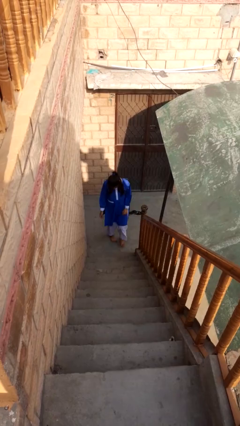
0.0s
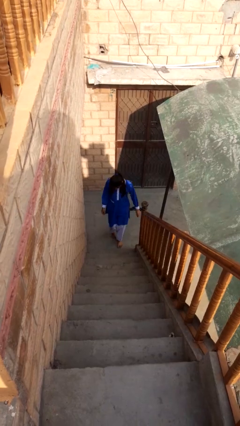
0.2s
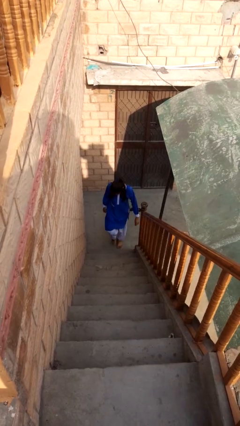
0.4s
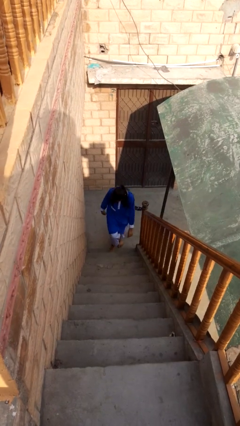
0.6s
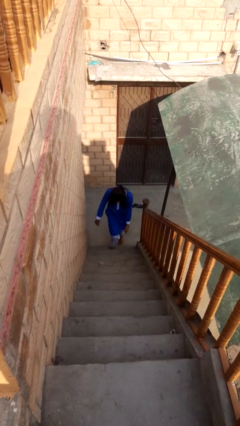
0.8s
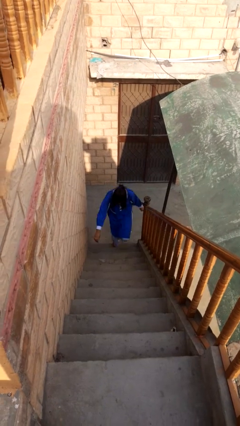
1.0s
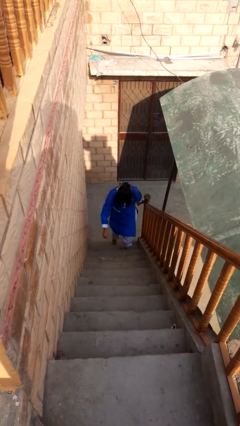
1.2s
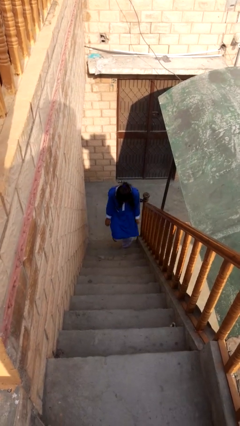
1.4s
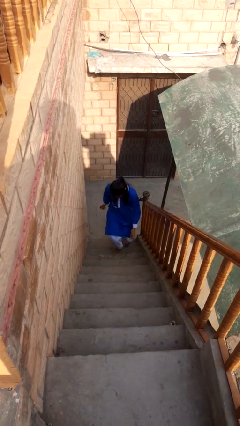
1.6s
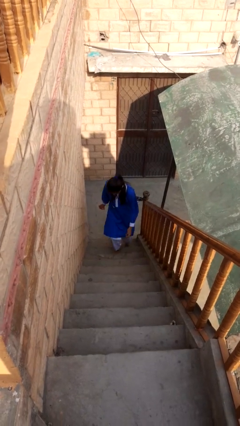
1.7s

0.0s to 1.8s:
person climbs up stairs

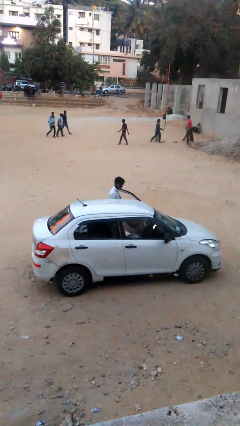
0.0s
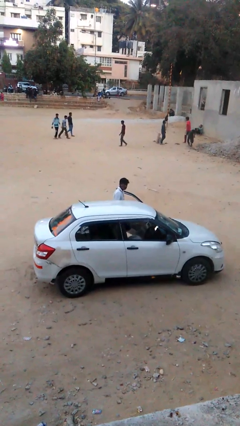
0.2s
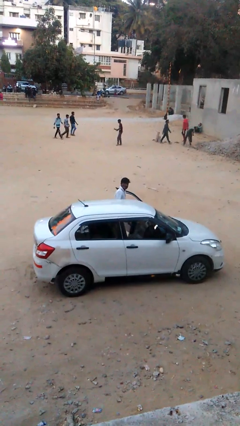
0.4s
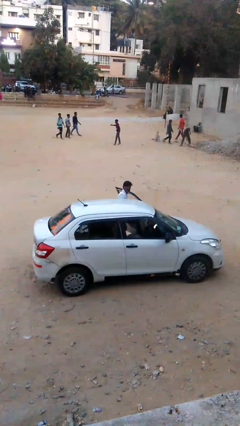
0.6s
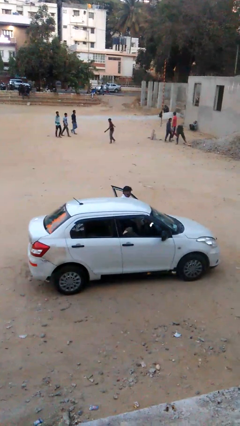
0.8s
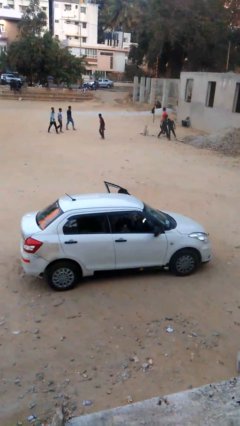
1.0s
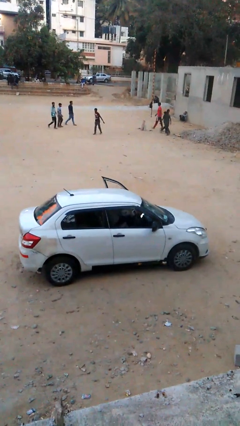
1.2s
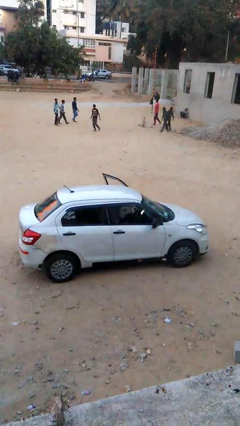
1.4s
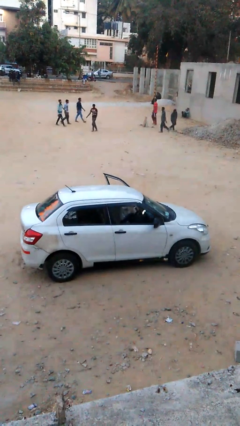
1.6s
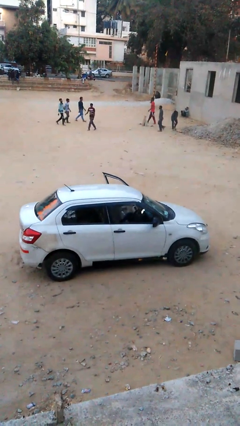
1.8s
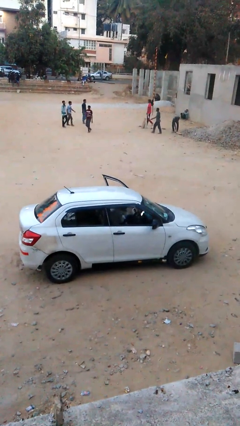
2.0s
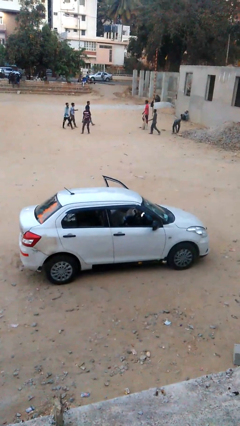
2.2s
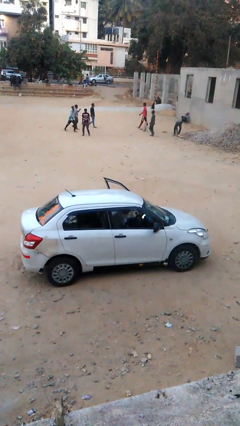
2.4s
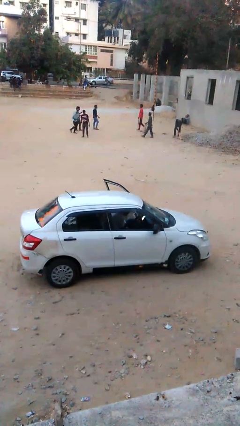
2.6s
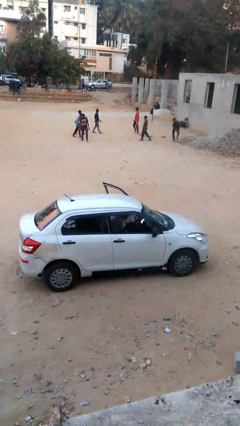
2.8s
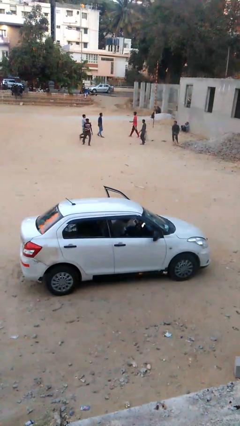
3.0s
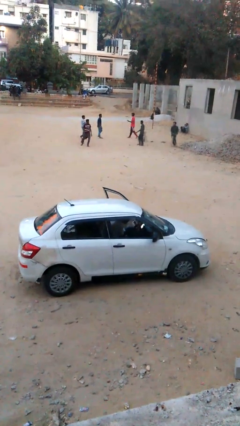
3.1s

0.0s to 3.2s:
person enters car

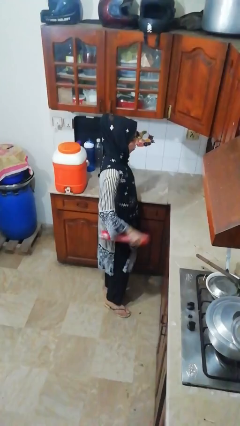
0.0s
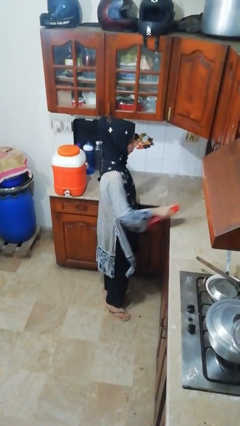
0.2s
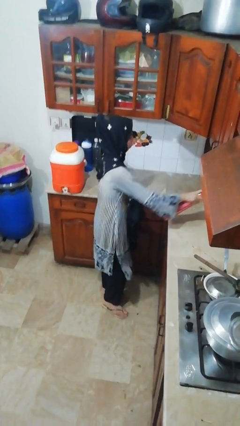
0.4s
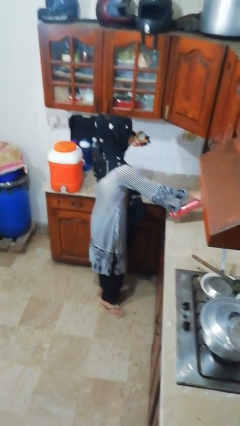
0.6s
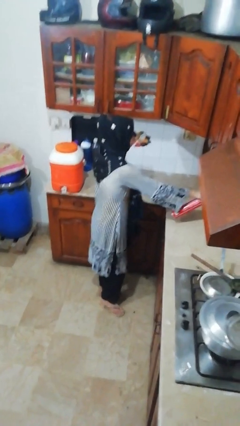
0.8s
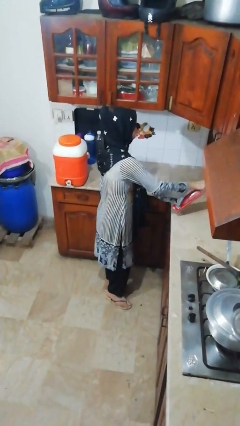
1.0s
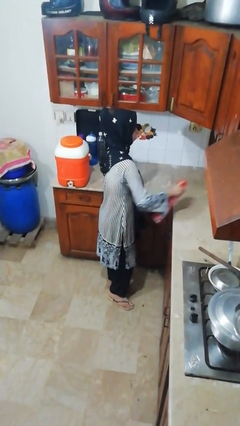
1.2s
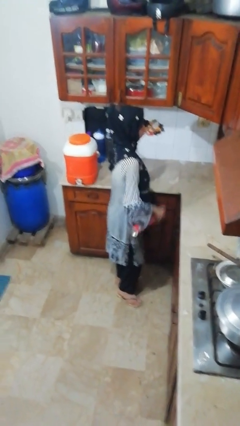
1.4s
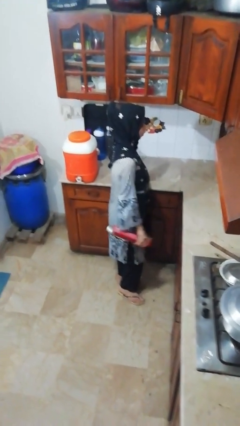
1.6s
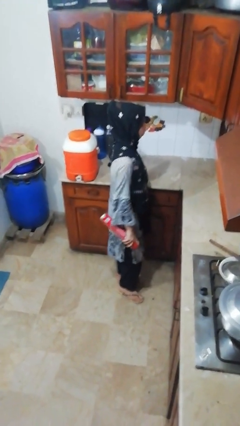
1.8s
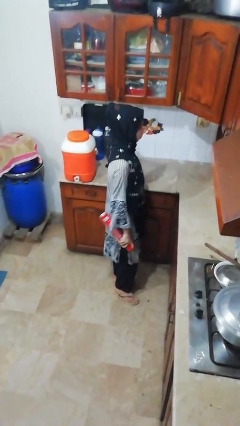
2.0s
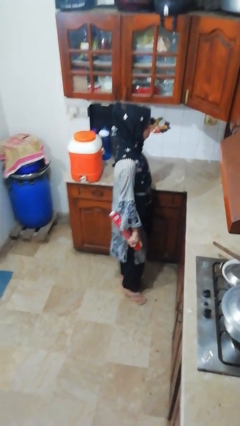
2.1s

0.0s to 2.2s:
person sprays from bottle

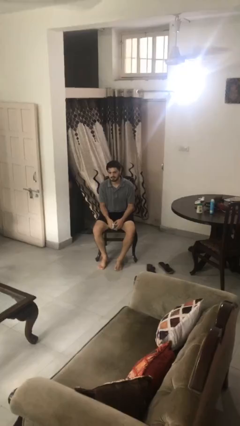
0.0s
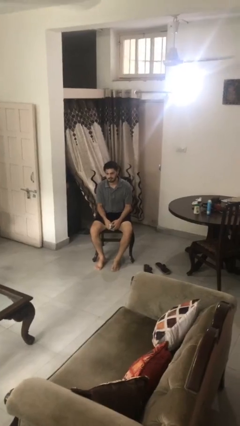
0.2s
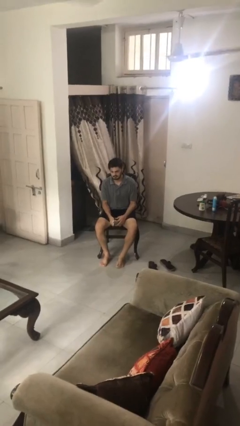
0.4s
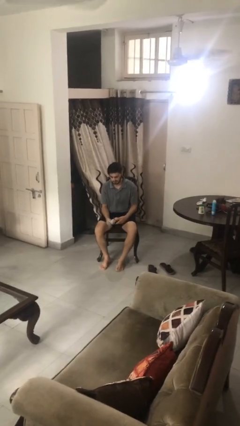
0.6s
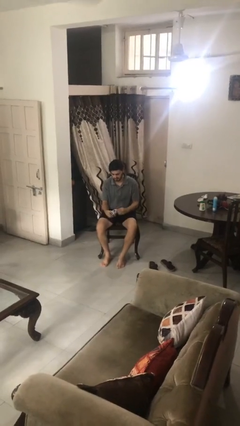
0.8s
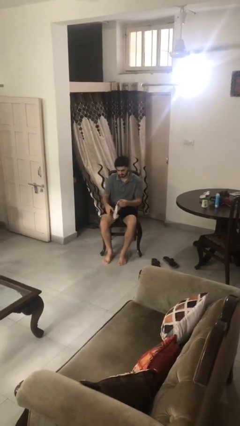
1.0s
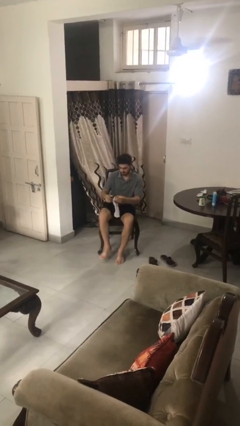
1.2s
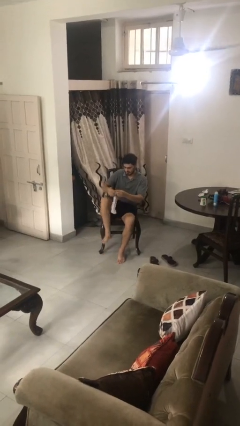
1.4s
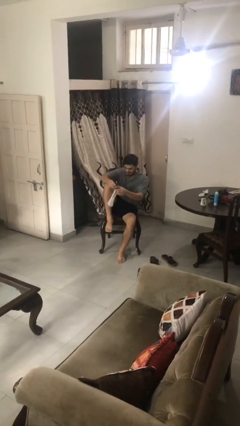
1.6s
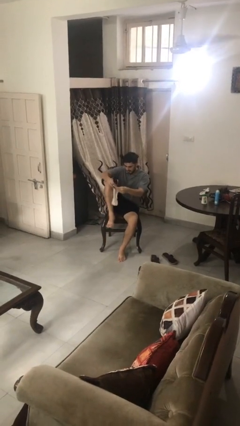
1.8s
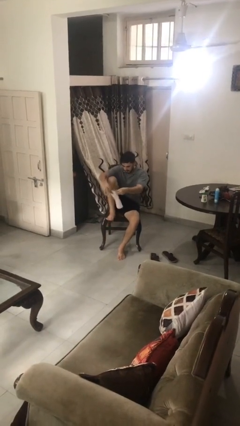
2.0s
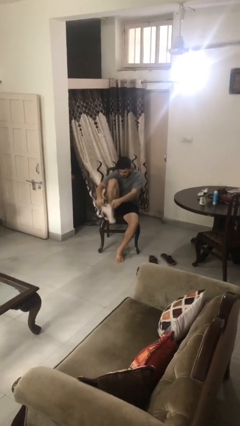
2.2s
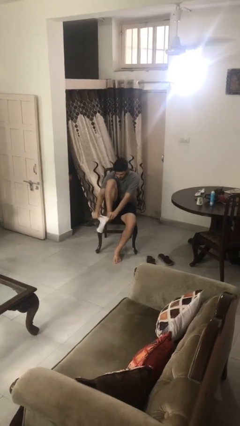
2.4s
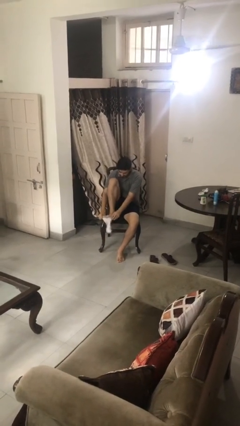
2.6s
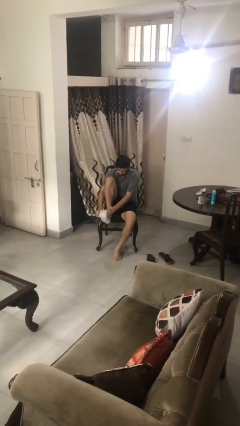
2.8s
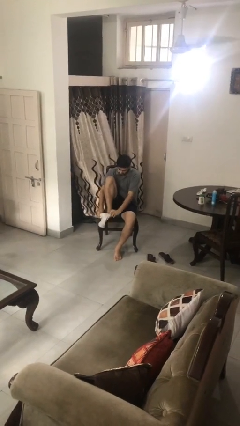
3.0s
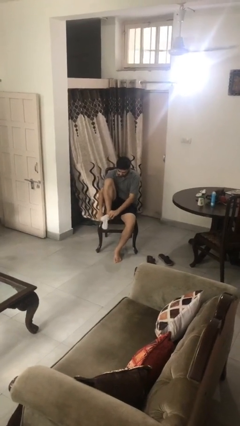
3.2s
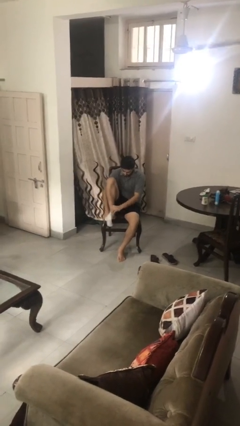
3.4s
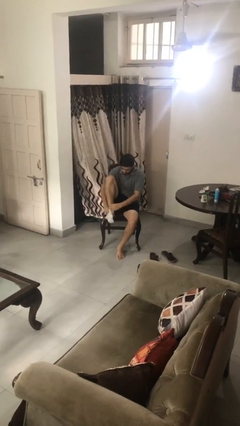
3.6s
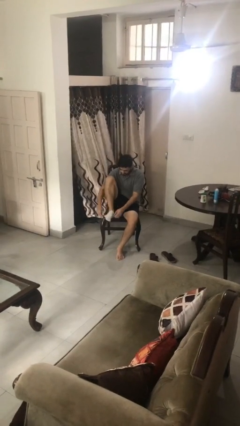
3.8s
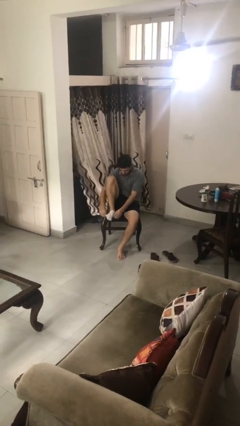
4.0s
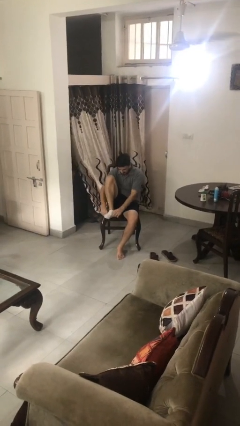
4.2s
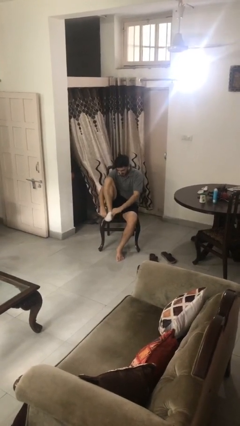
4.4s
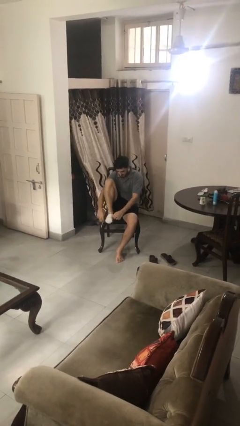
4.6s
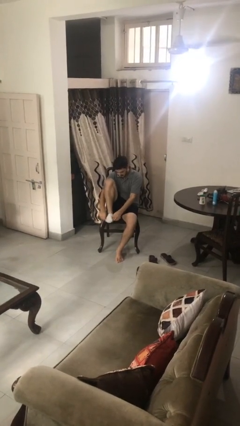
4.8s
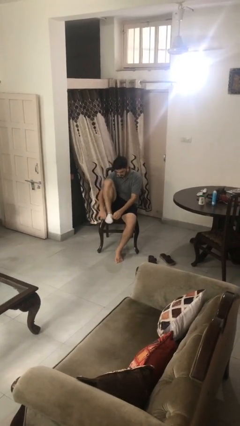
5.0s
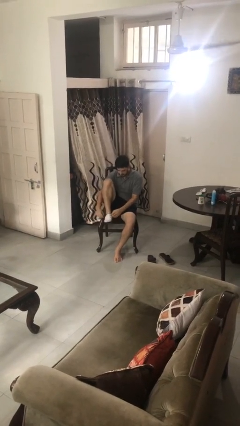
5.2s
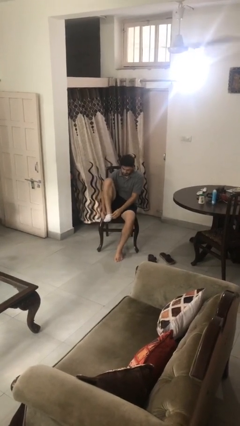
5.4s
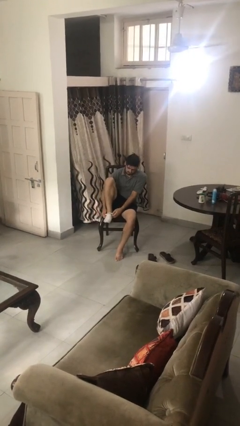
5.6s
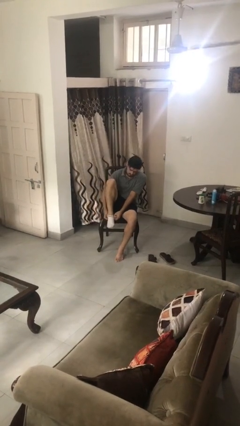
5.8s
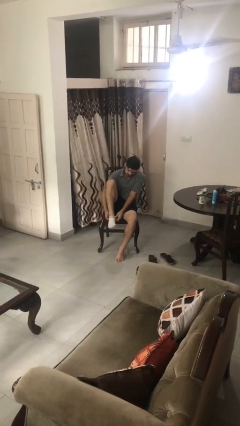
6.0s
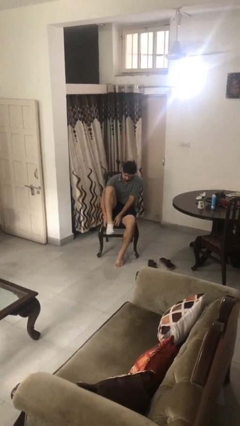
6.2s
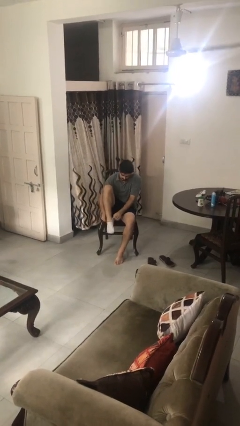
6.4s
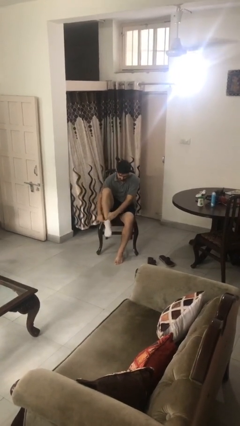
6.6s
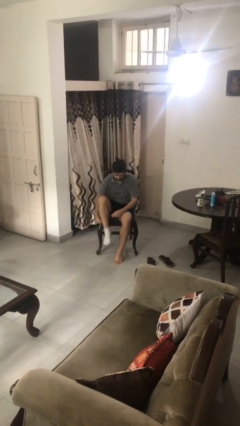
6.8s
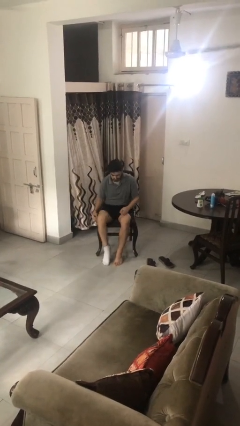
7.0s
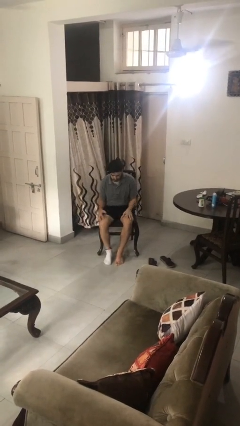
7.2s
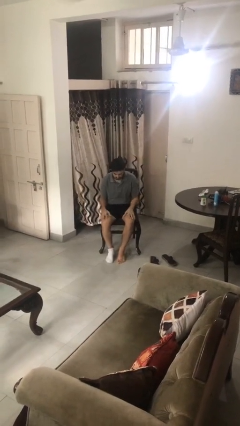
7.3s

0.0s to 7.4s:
person puts on socks

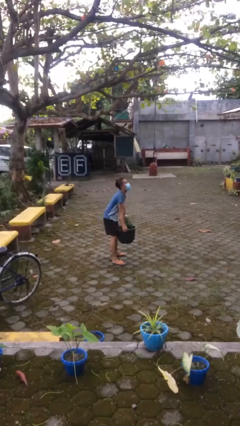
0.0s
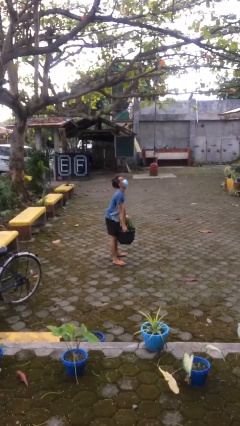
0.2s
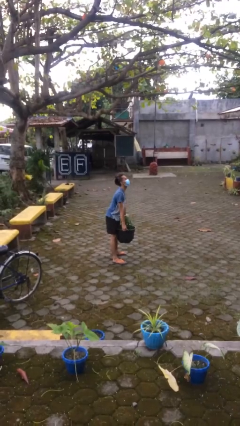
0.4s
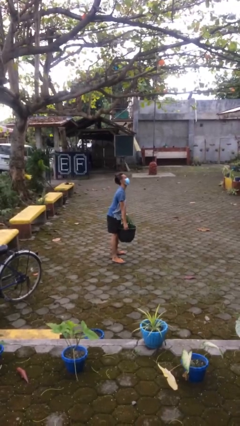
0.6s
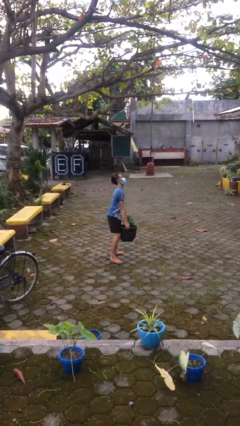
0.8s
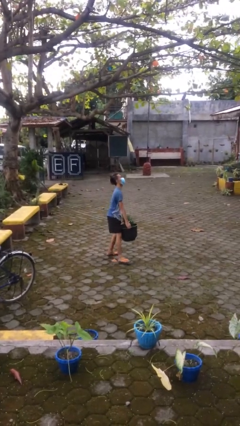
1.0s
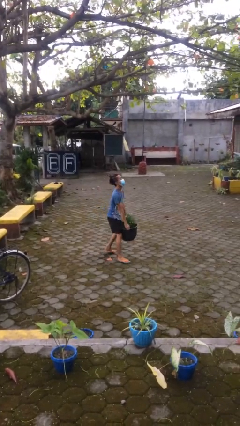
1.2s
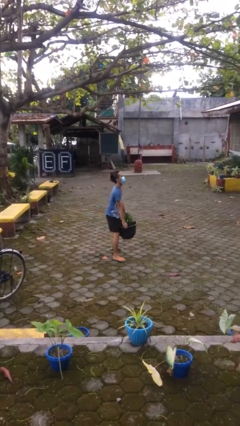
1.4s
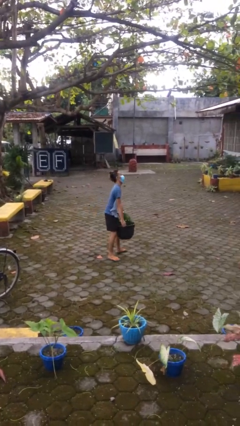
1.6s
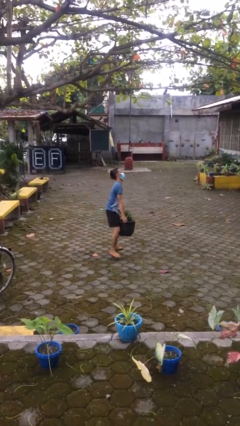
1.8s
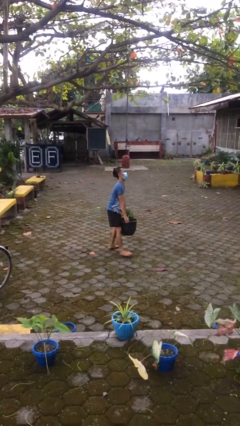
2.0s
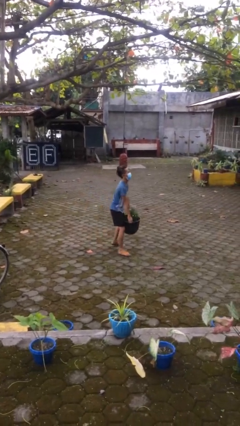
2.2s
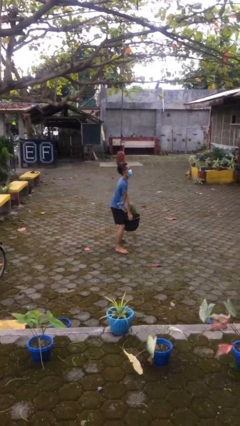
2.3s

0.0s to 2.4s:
person carries heavy object

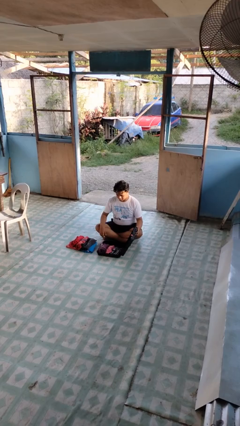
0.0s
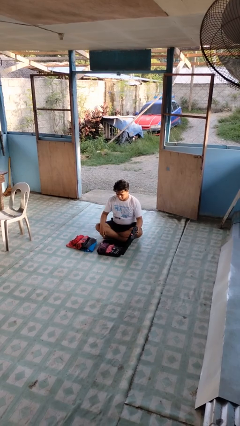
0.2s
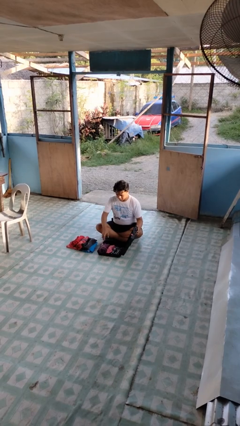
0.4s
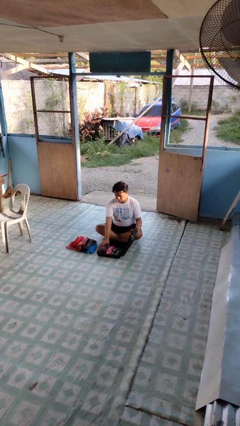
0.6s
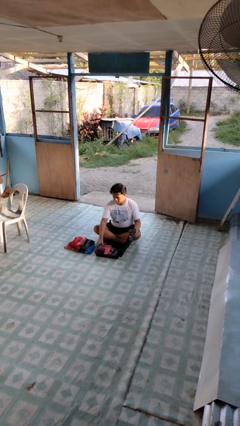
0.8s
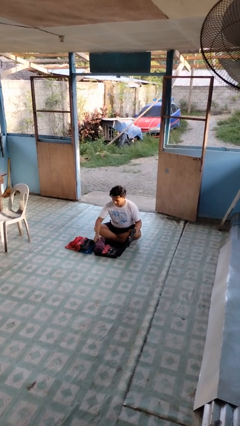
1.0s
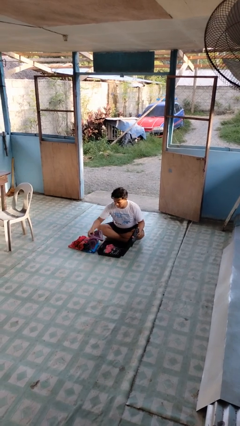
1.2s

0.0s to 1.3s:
person unloads clothes from suitcase
